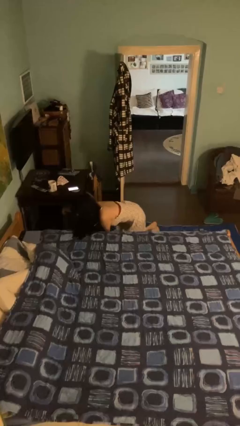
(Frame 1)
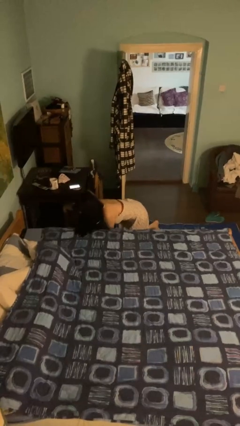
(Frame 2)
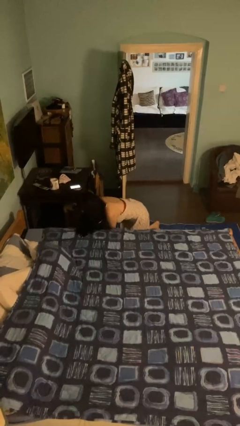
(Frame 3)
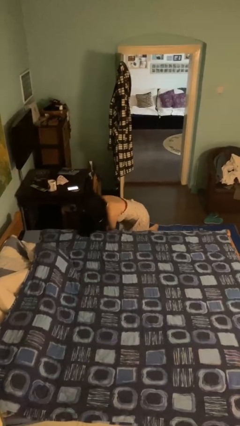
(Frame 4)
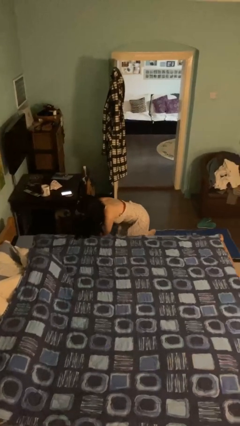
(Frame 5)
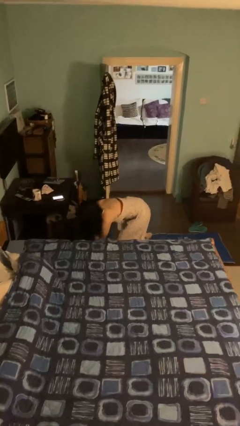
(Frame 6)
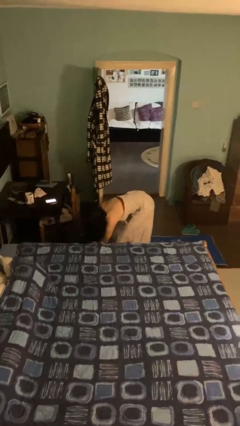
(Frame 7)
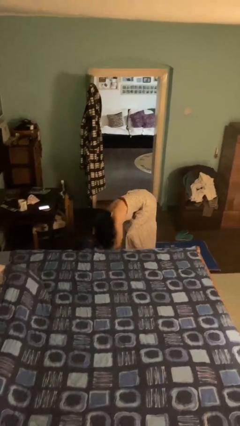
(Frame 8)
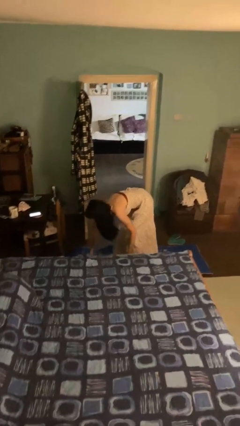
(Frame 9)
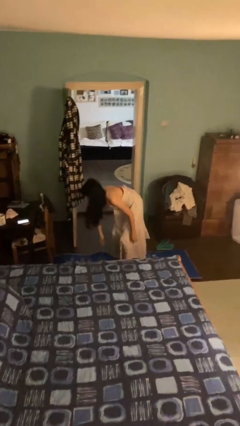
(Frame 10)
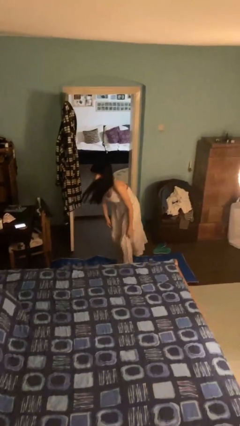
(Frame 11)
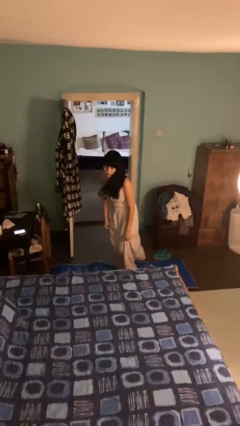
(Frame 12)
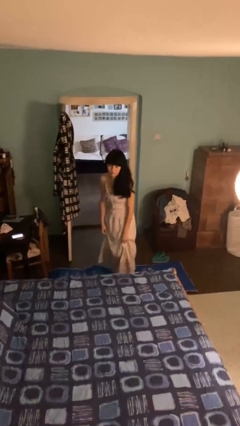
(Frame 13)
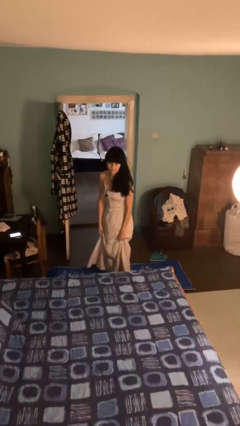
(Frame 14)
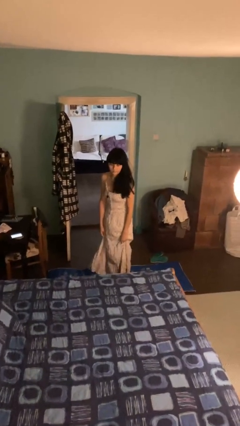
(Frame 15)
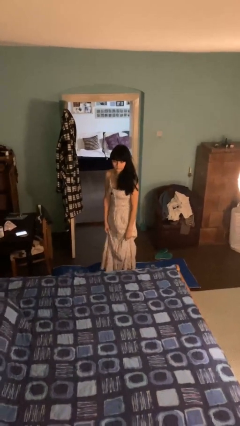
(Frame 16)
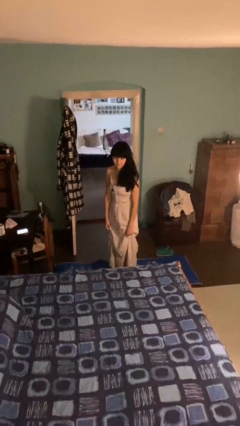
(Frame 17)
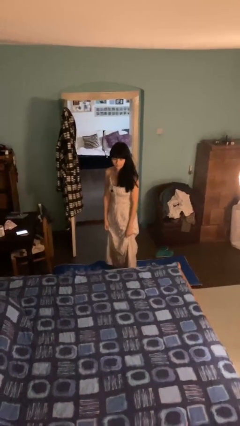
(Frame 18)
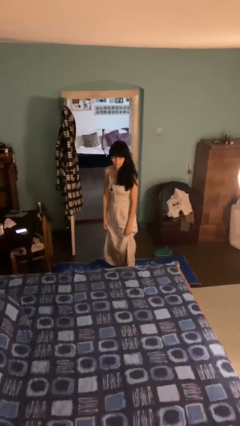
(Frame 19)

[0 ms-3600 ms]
person stands up from floor

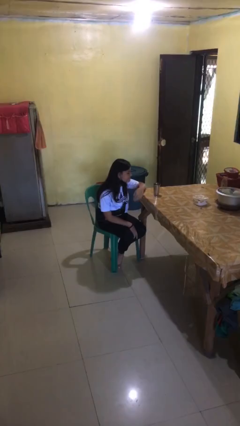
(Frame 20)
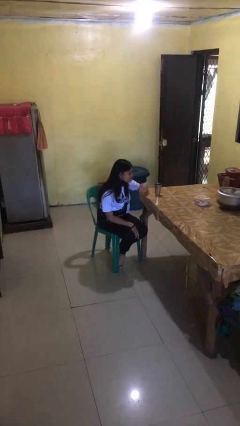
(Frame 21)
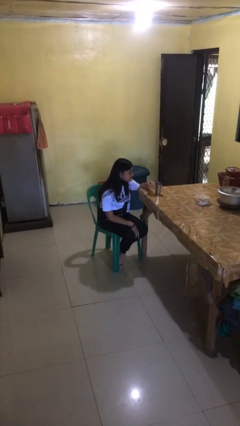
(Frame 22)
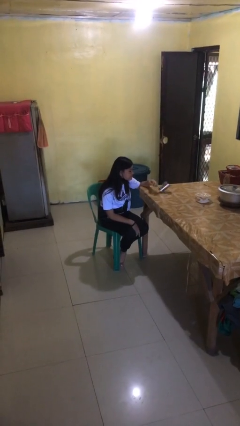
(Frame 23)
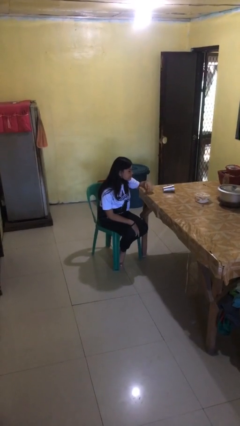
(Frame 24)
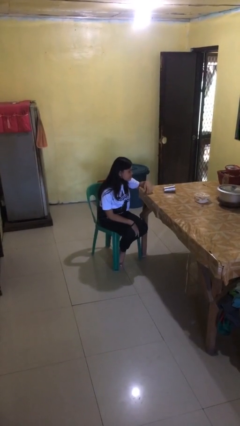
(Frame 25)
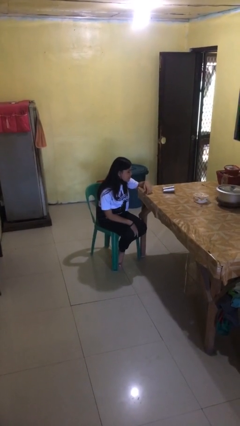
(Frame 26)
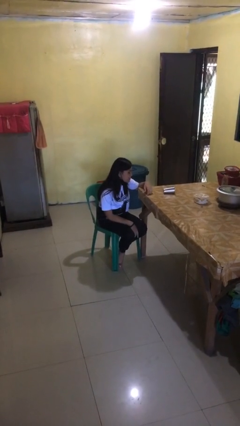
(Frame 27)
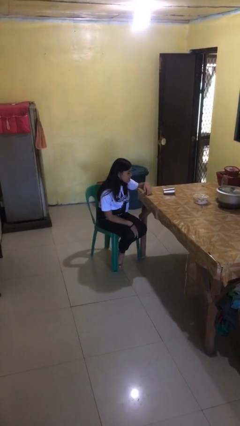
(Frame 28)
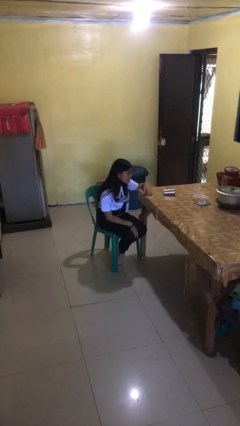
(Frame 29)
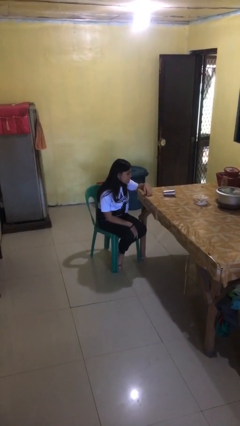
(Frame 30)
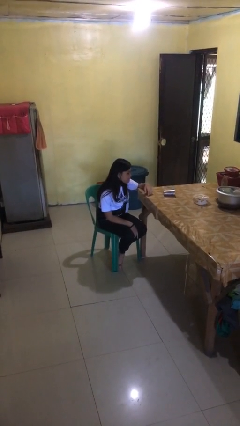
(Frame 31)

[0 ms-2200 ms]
person knocks over glass

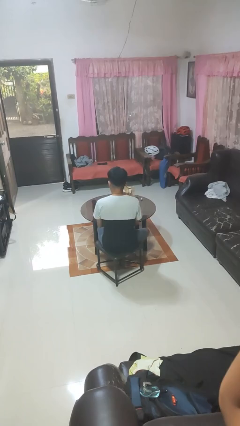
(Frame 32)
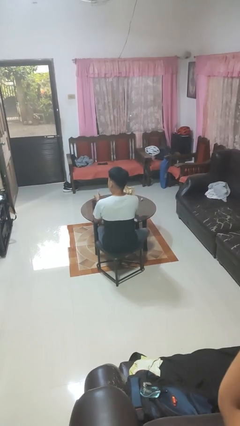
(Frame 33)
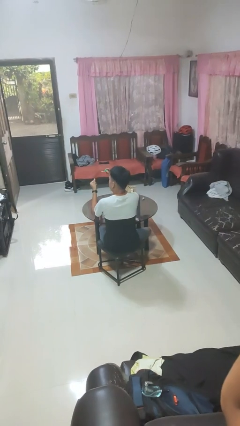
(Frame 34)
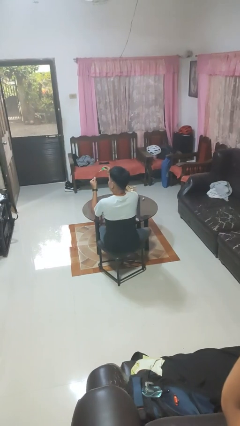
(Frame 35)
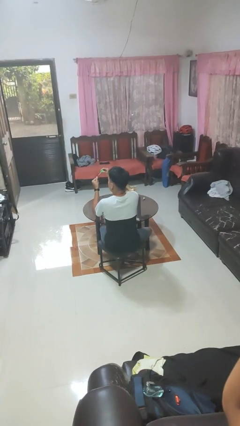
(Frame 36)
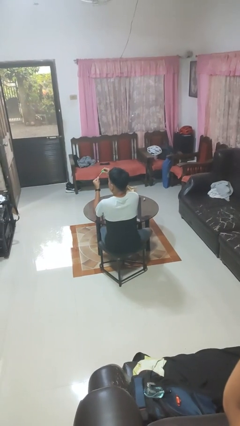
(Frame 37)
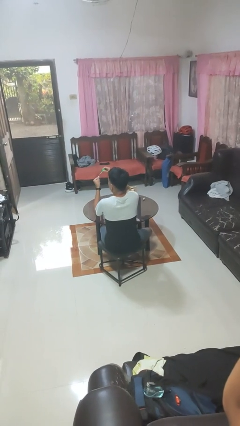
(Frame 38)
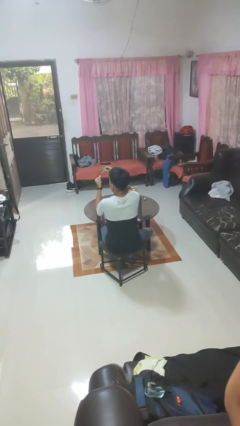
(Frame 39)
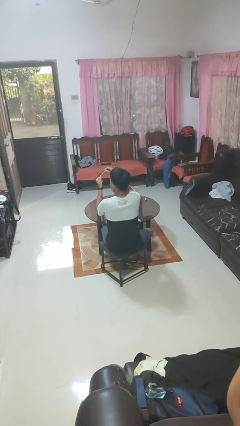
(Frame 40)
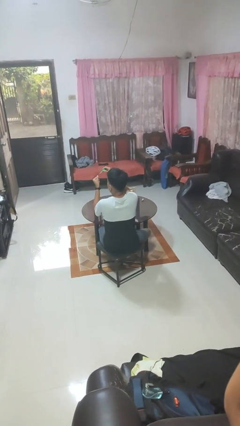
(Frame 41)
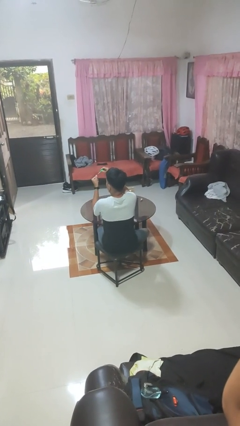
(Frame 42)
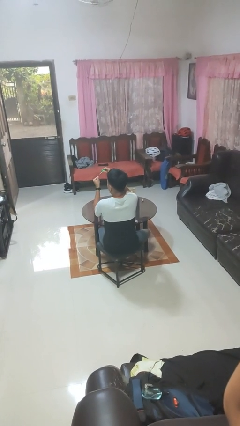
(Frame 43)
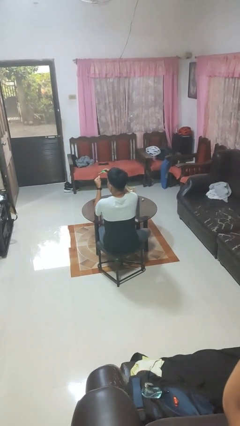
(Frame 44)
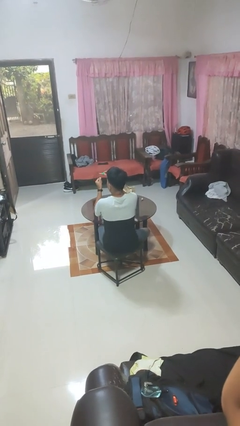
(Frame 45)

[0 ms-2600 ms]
person paints fingernails

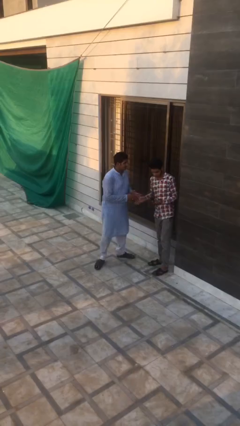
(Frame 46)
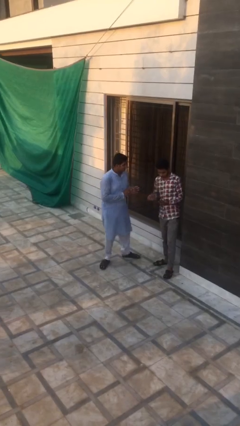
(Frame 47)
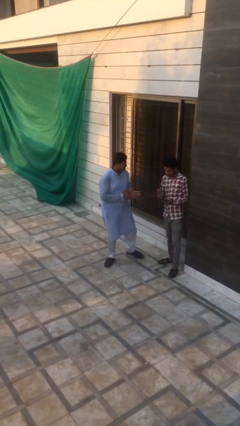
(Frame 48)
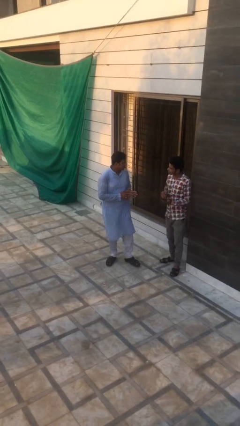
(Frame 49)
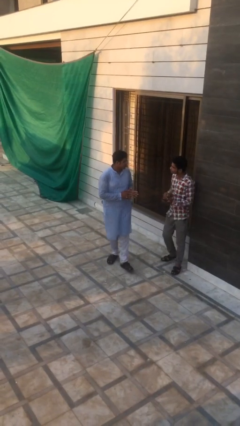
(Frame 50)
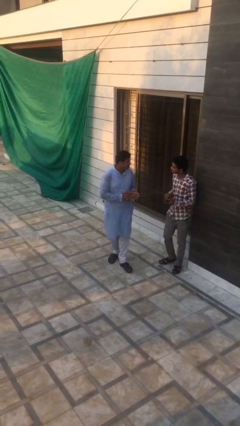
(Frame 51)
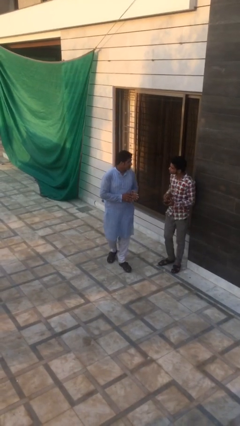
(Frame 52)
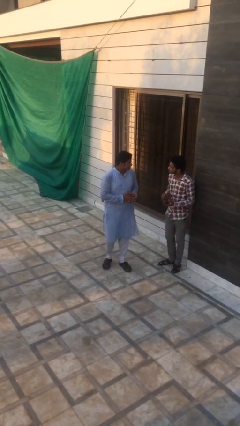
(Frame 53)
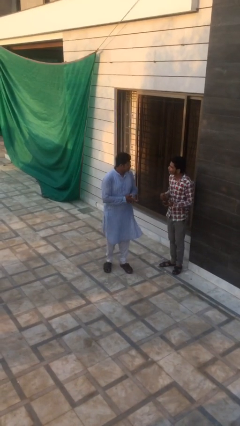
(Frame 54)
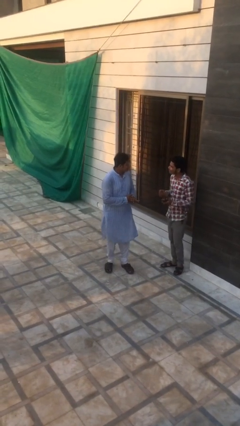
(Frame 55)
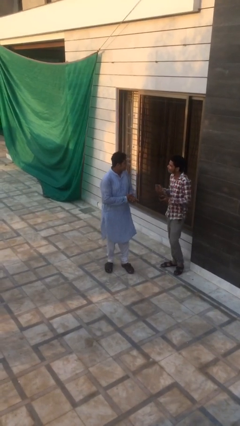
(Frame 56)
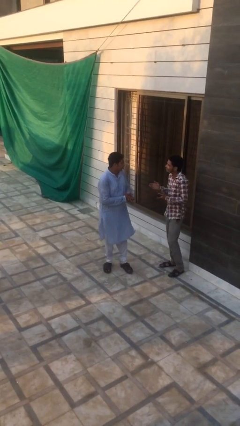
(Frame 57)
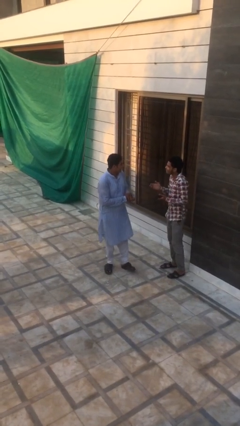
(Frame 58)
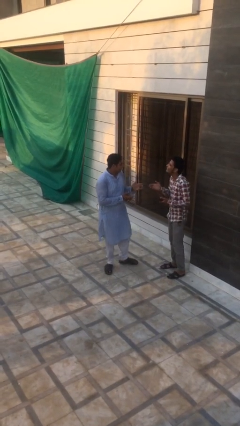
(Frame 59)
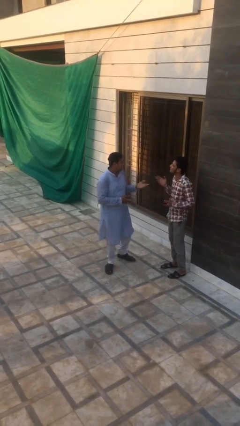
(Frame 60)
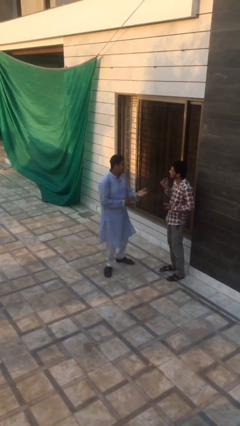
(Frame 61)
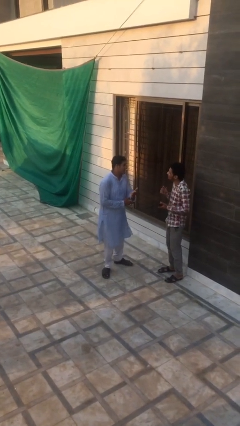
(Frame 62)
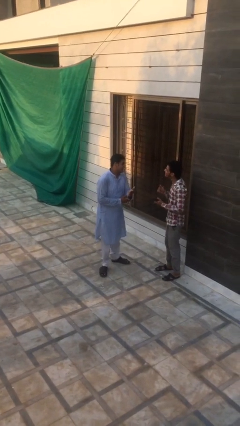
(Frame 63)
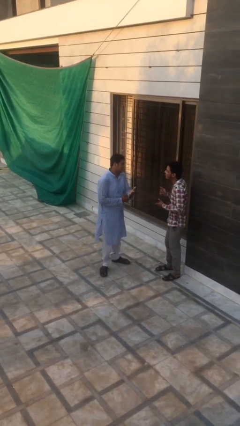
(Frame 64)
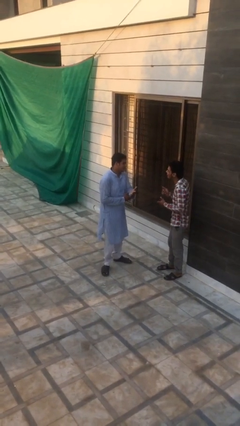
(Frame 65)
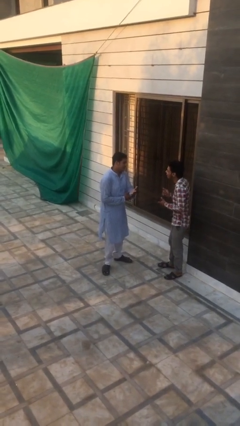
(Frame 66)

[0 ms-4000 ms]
person talks to person

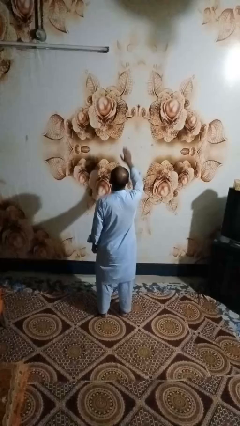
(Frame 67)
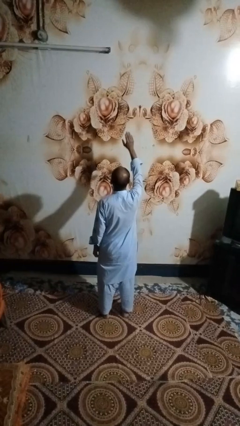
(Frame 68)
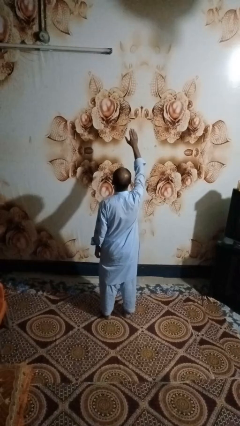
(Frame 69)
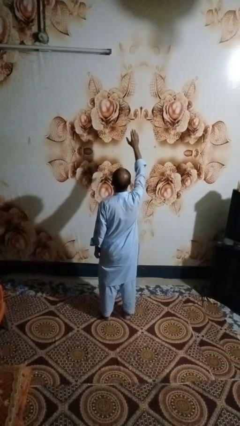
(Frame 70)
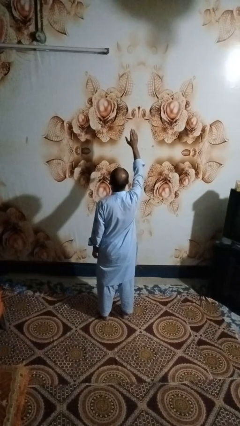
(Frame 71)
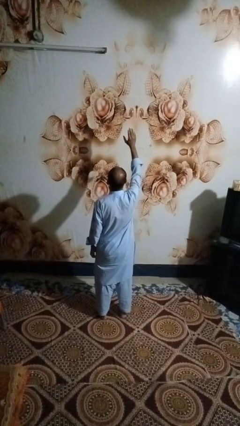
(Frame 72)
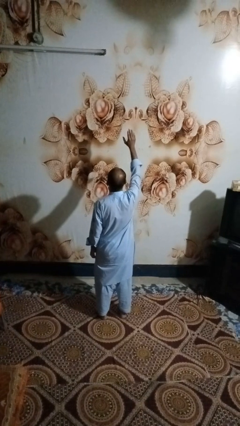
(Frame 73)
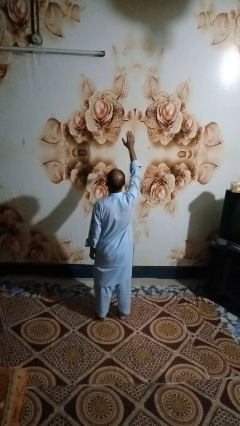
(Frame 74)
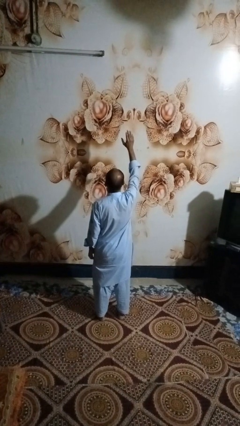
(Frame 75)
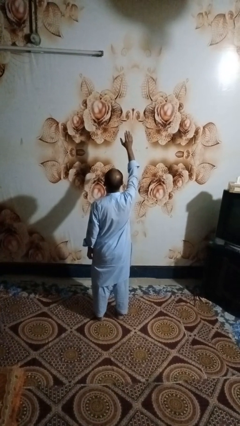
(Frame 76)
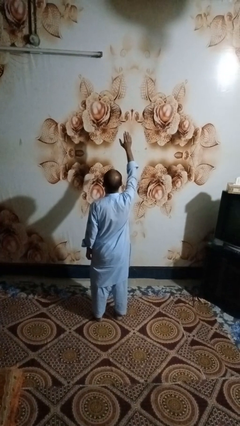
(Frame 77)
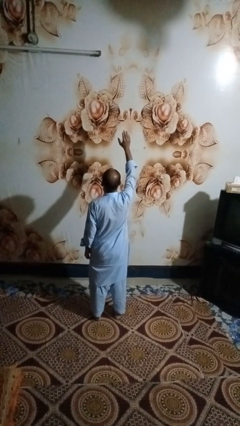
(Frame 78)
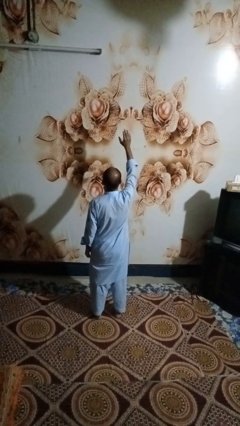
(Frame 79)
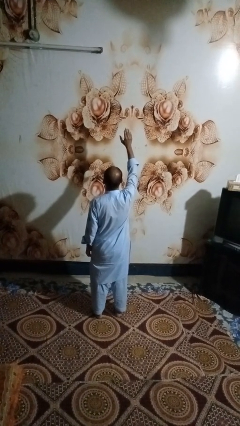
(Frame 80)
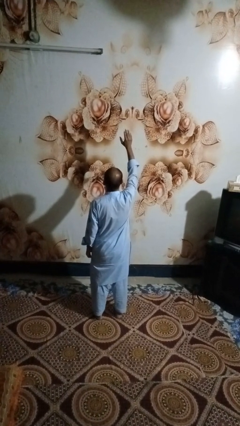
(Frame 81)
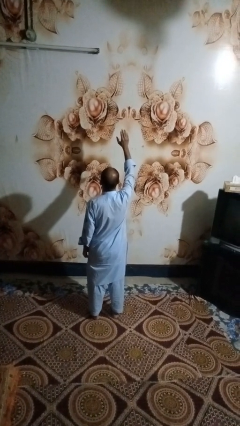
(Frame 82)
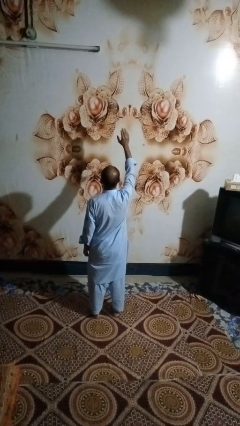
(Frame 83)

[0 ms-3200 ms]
person gestures raise hand

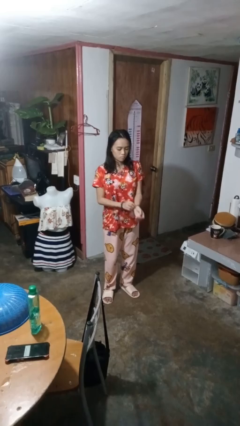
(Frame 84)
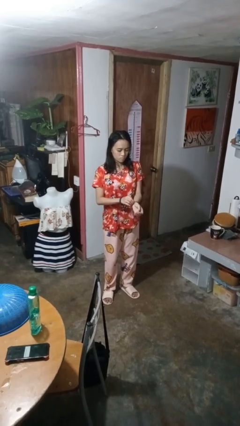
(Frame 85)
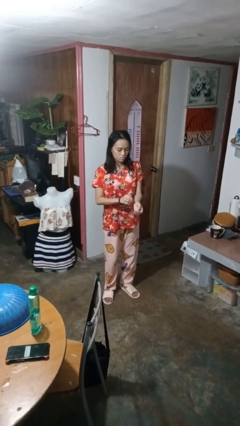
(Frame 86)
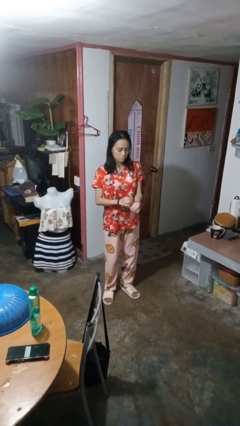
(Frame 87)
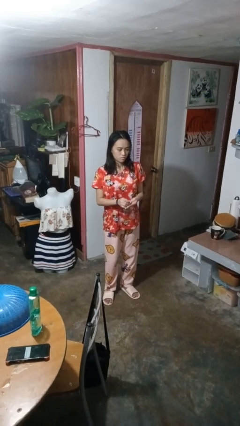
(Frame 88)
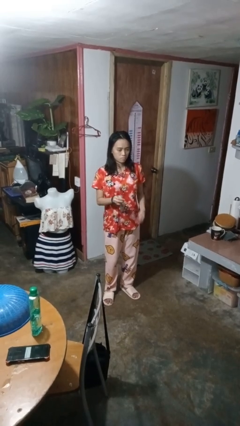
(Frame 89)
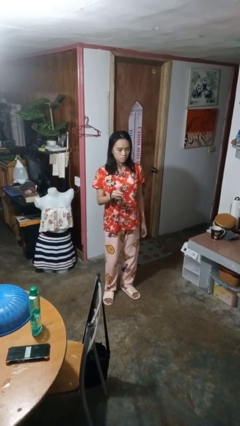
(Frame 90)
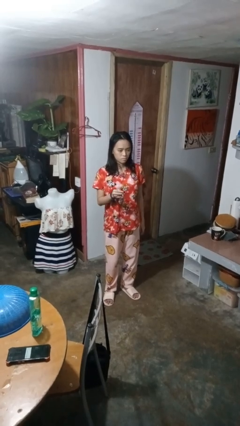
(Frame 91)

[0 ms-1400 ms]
person takes off wristwatch
